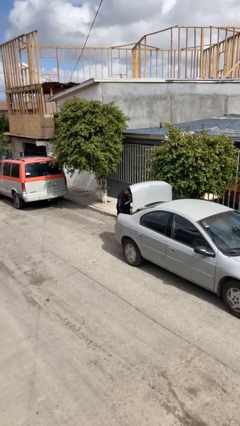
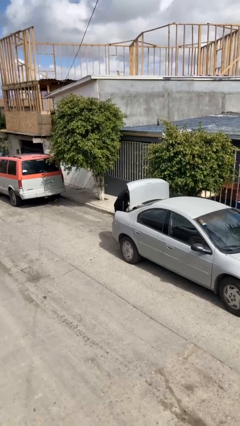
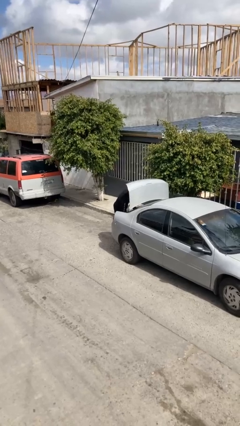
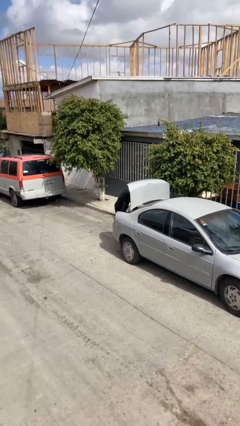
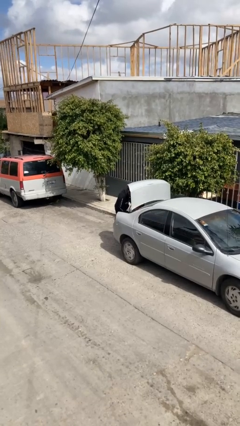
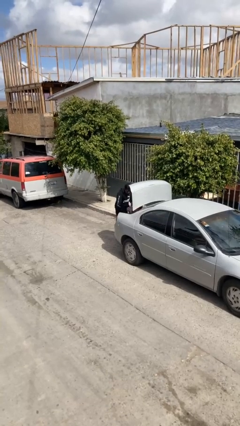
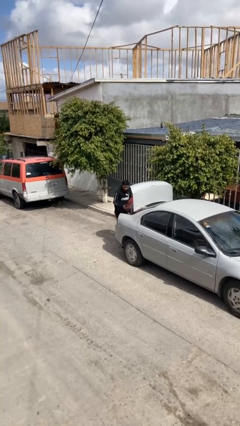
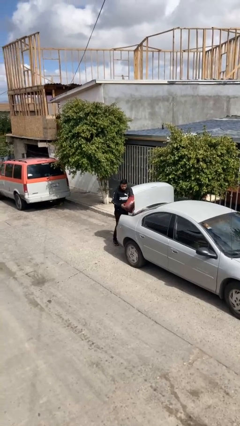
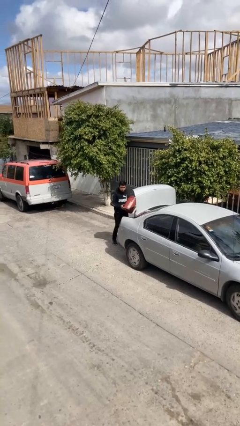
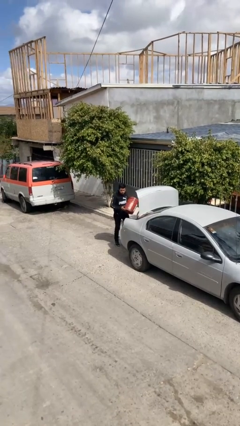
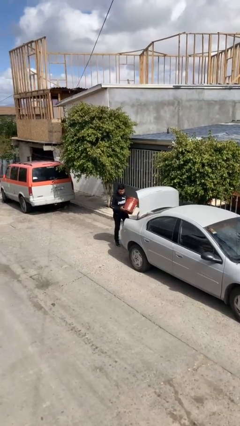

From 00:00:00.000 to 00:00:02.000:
person unloads car

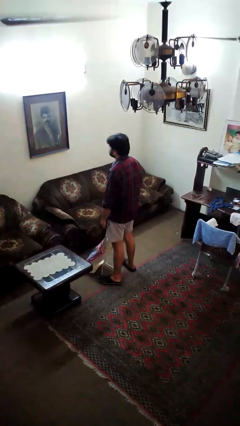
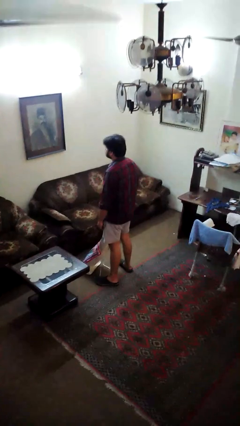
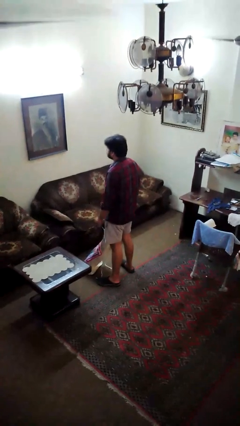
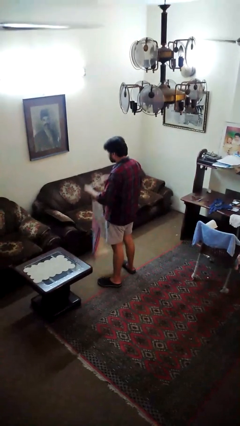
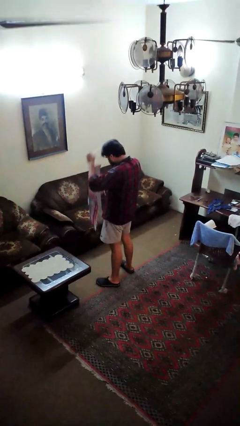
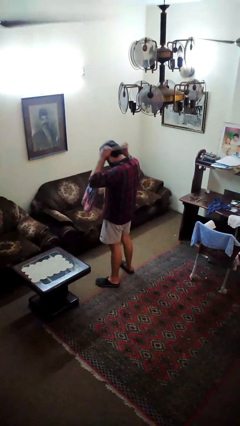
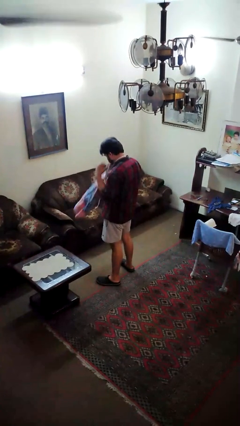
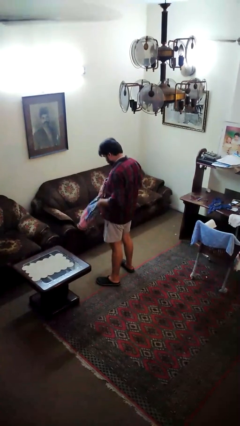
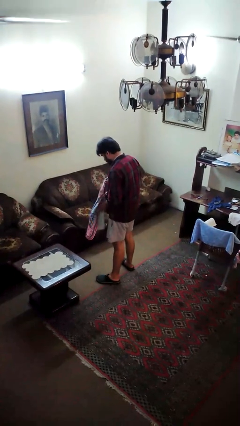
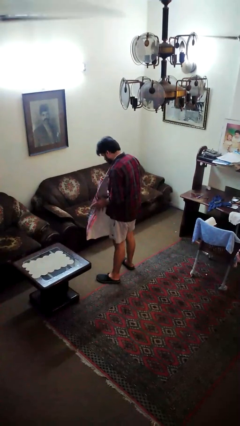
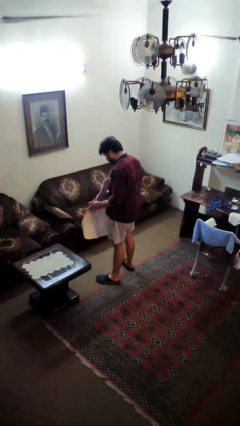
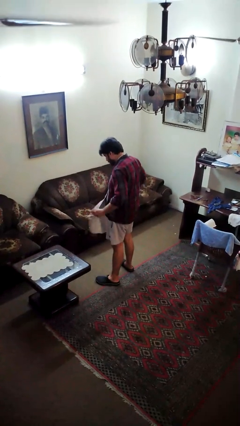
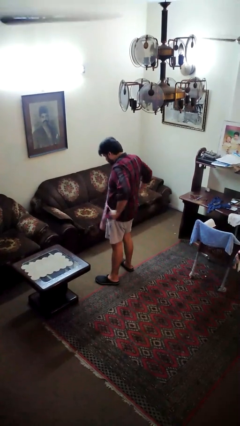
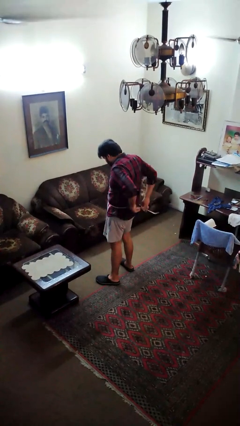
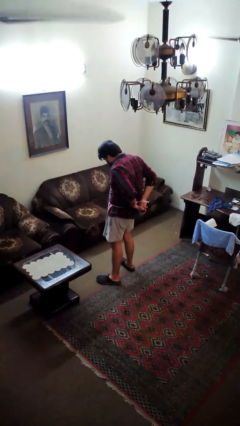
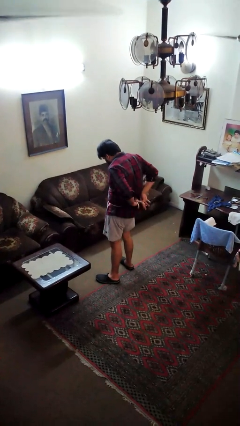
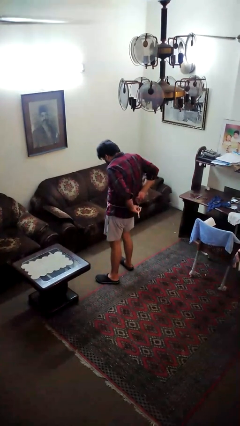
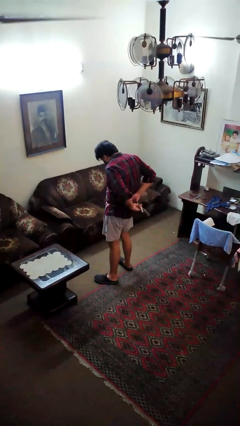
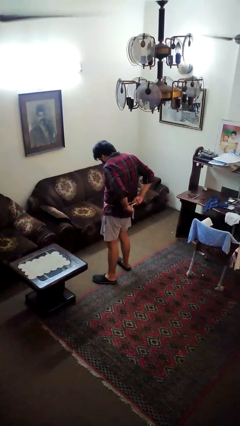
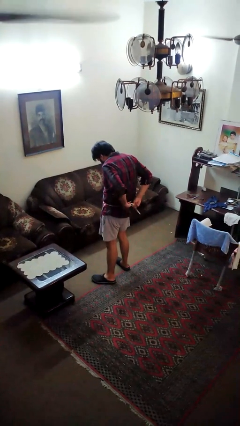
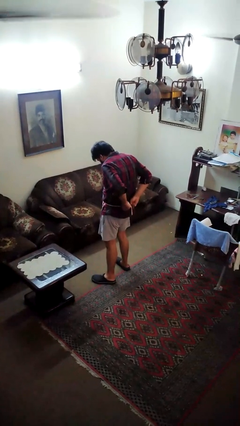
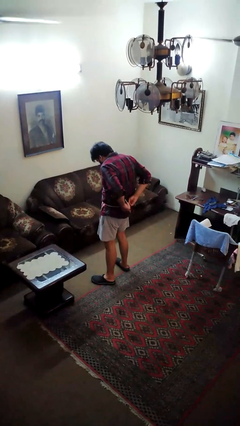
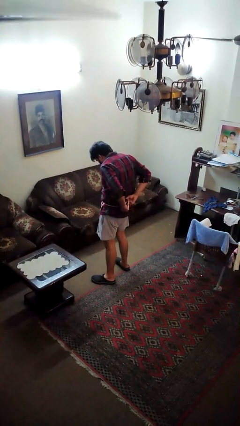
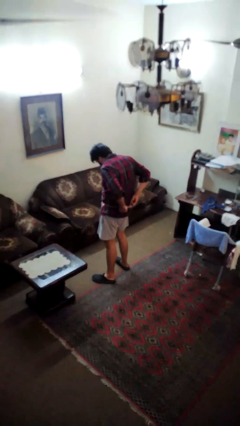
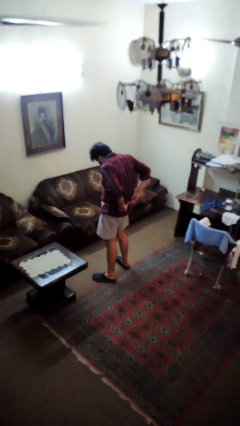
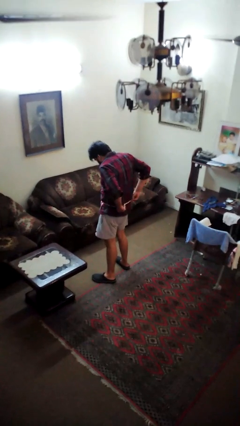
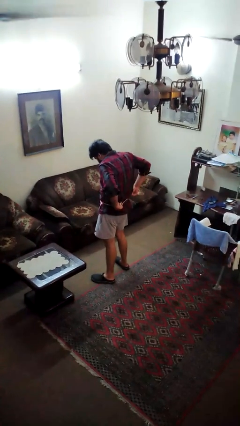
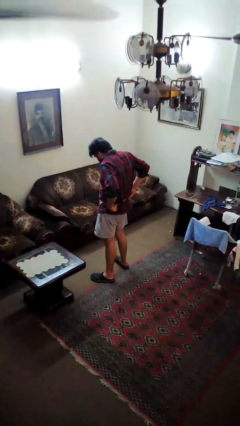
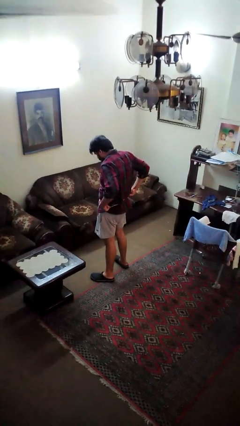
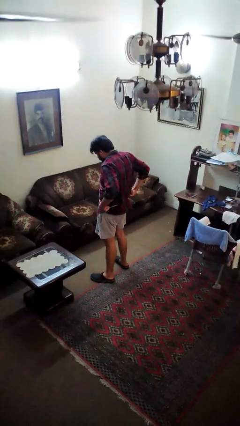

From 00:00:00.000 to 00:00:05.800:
person puts on apron

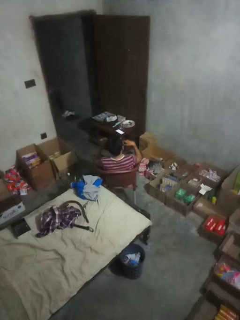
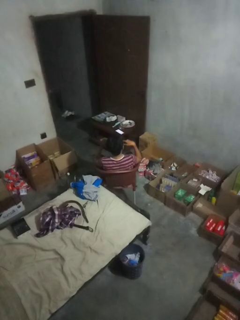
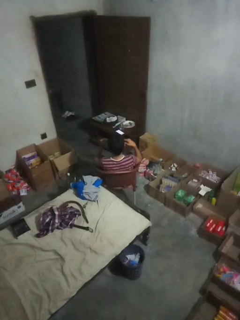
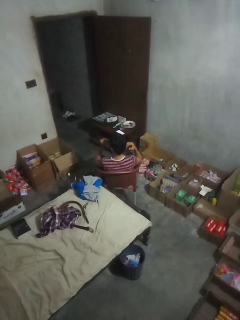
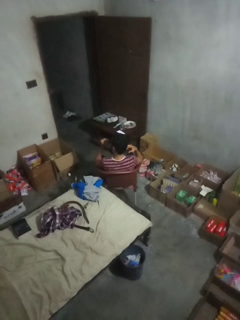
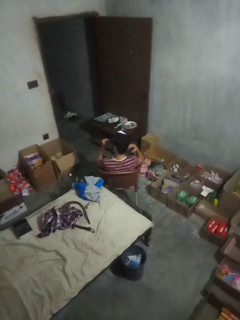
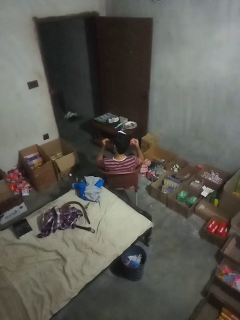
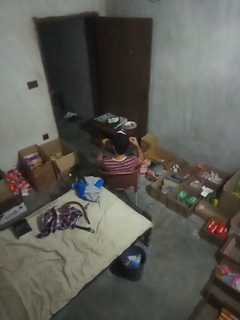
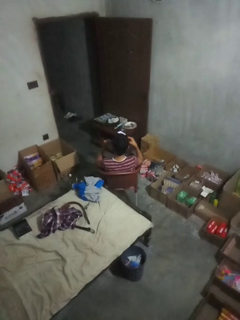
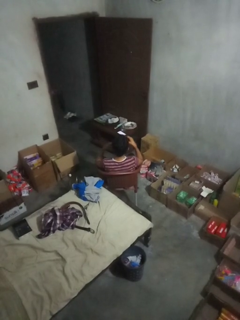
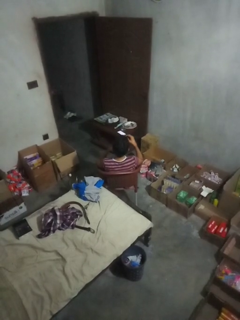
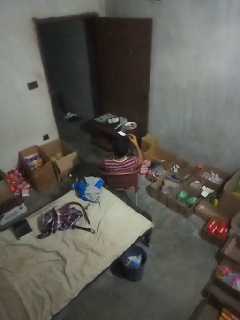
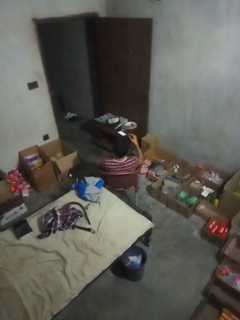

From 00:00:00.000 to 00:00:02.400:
person takes off earrings

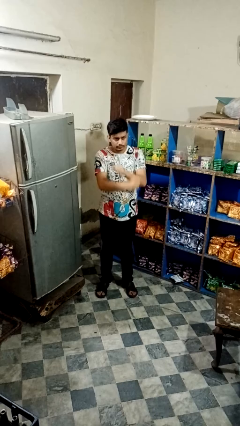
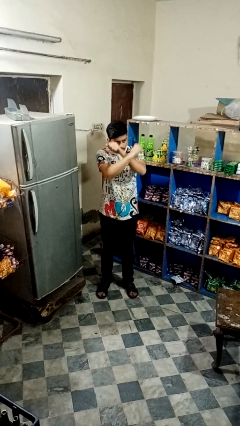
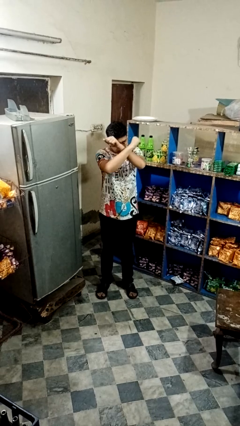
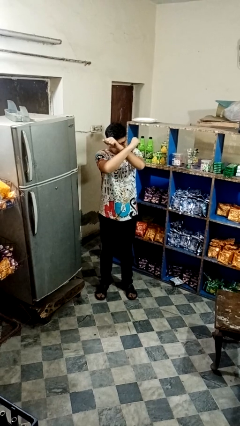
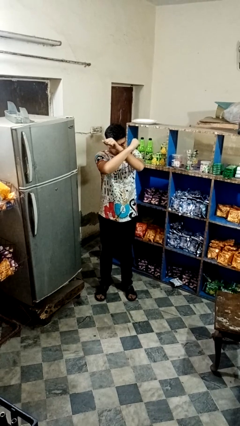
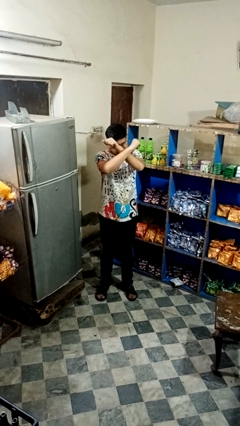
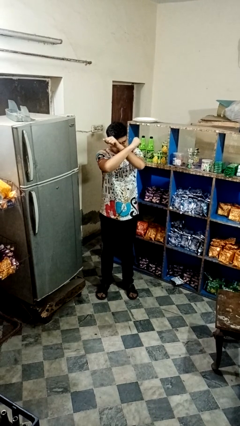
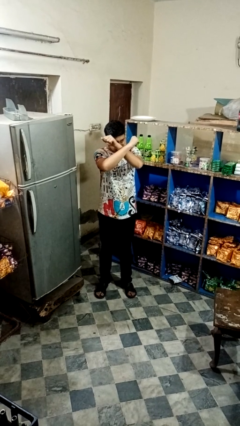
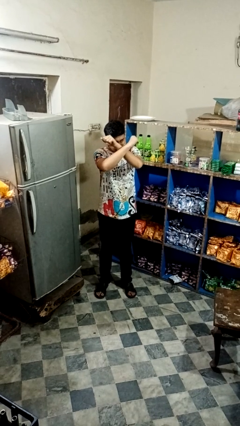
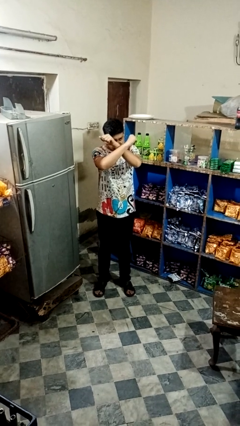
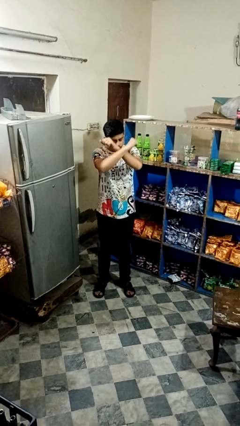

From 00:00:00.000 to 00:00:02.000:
person gestures arms x

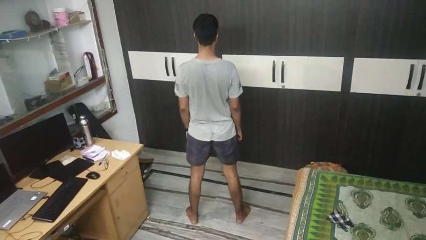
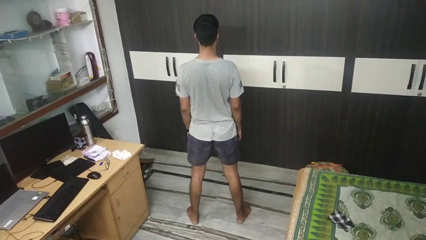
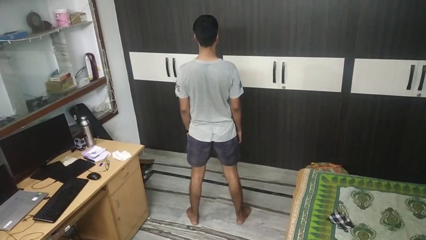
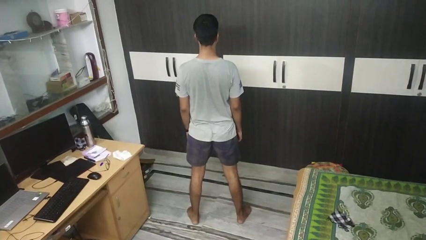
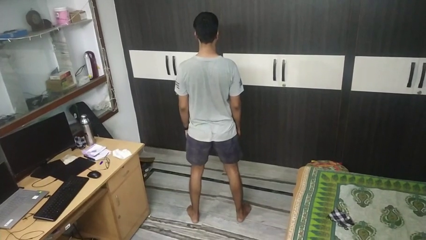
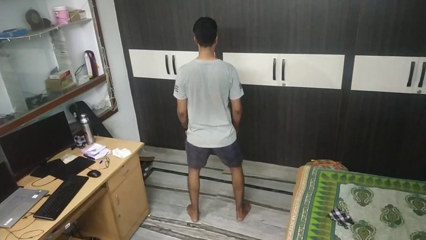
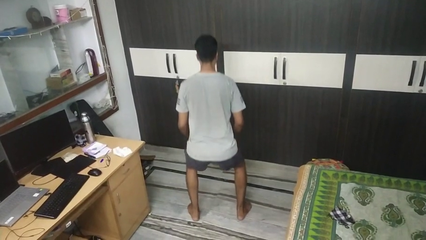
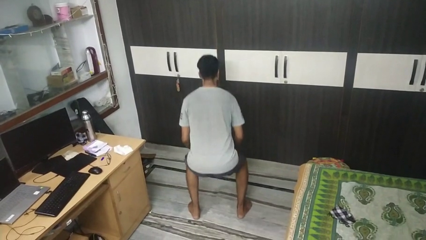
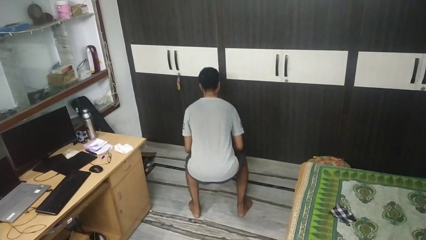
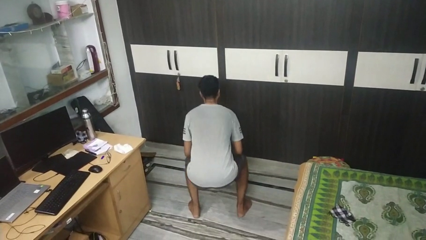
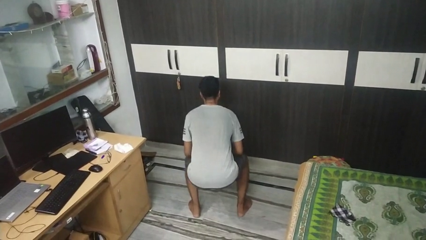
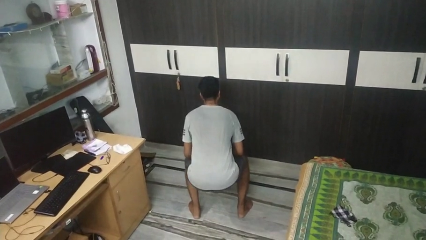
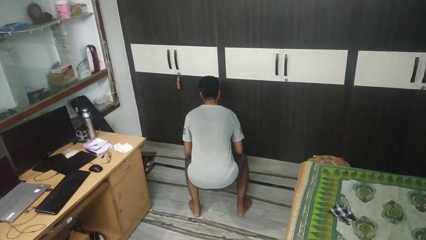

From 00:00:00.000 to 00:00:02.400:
person squats

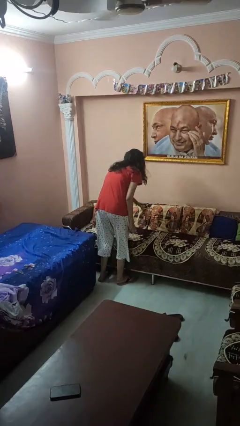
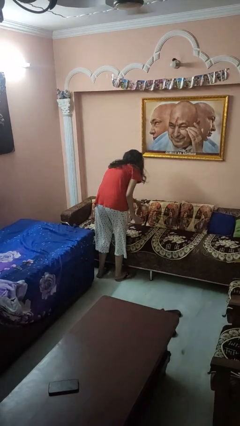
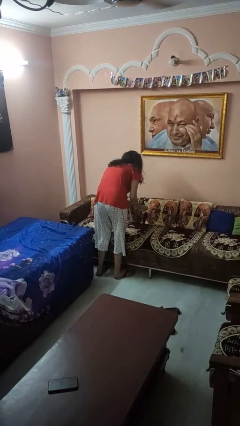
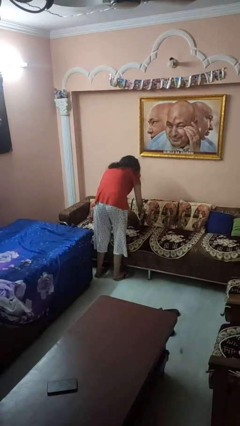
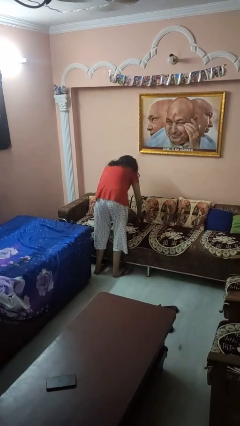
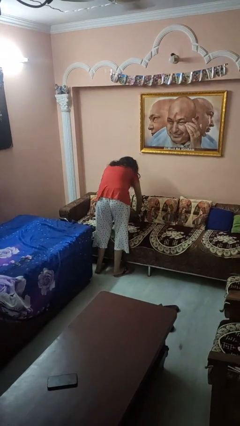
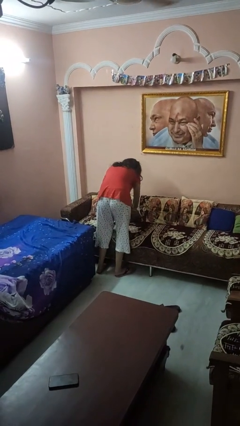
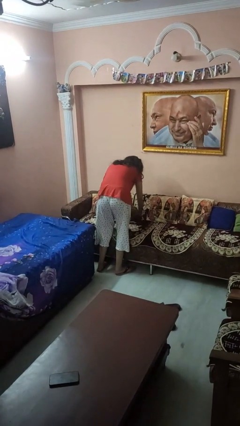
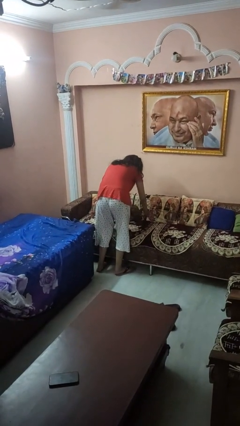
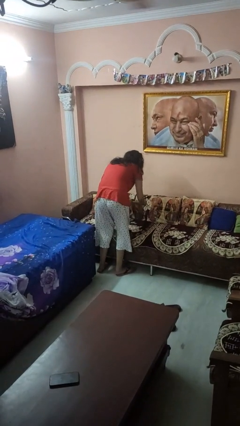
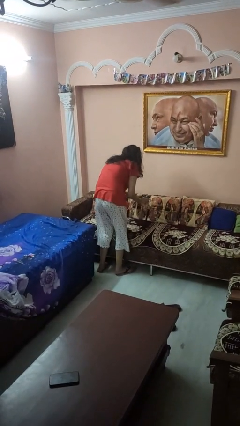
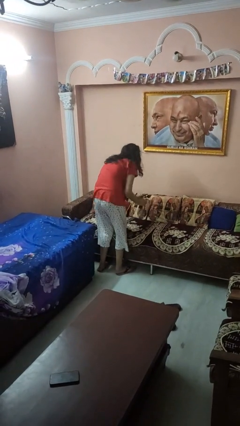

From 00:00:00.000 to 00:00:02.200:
person searches in couch

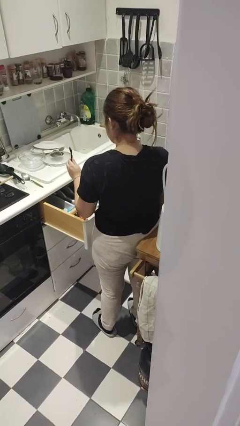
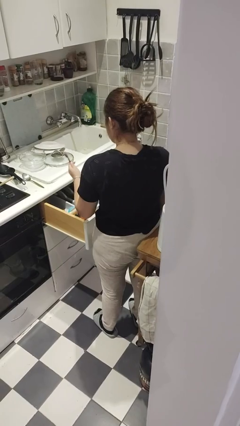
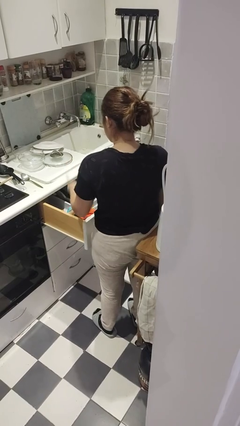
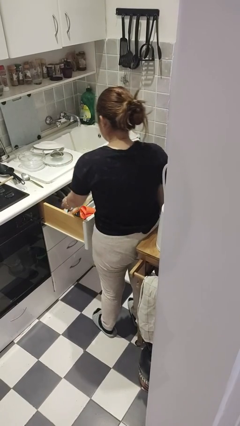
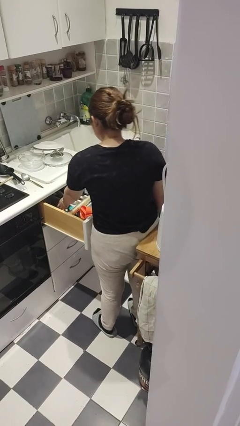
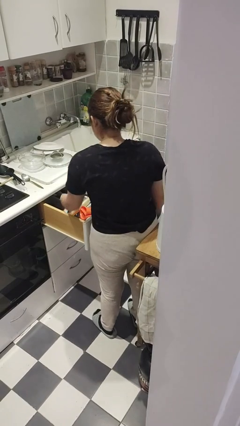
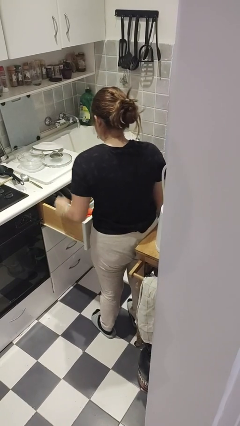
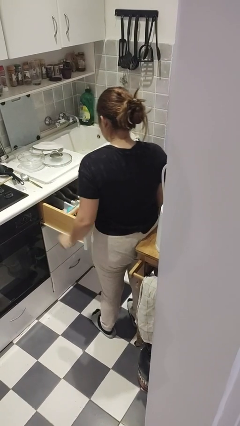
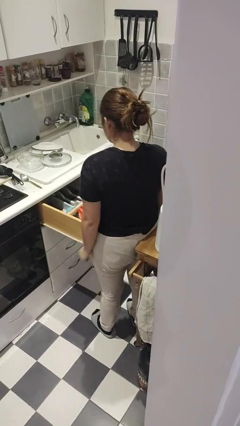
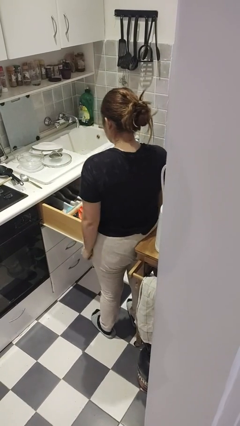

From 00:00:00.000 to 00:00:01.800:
person puts object into kitchen drawer
